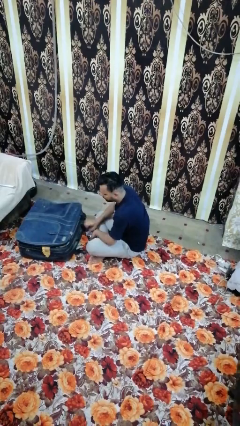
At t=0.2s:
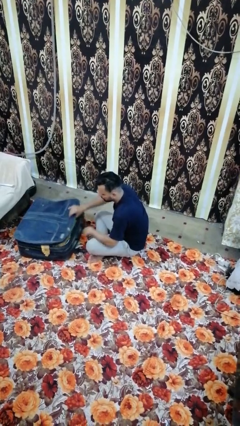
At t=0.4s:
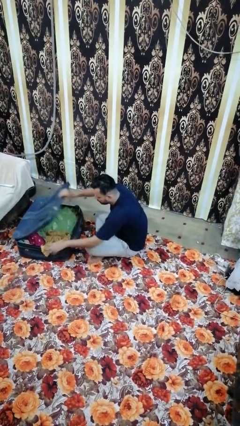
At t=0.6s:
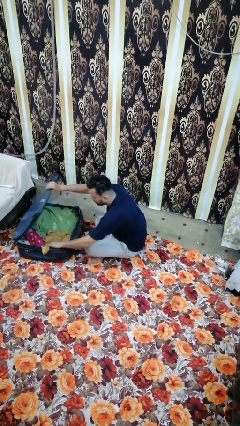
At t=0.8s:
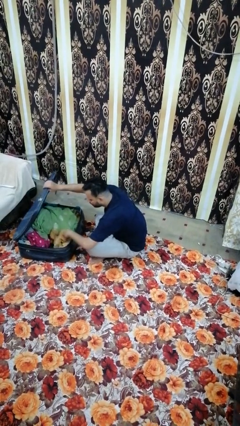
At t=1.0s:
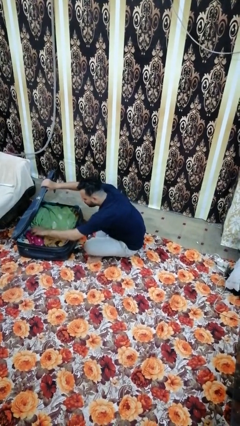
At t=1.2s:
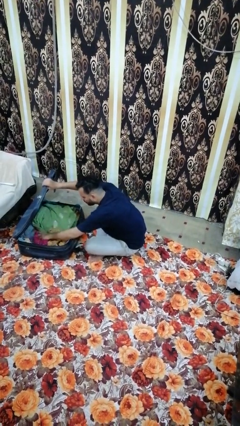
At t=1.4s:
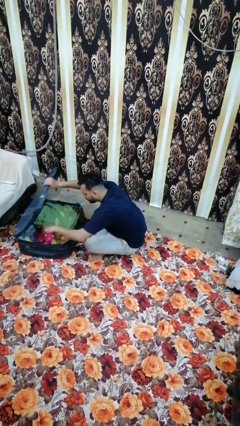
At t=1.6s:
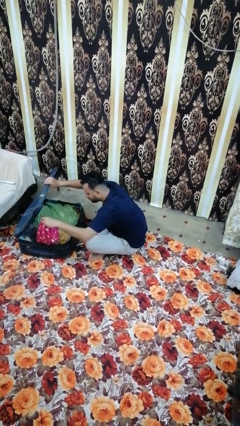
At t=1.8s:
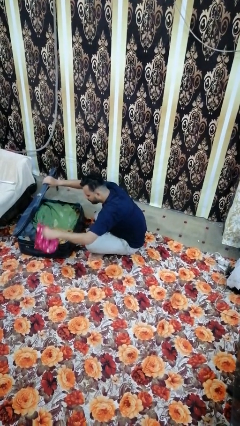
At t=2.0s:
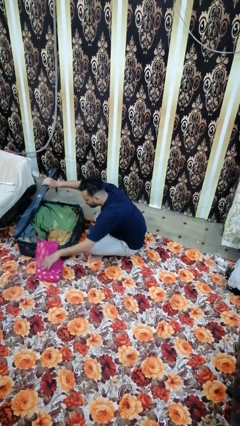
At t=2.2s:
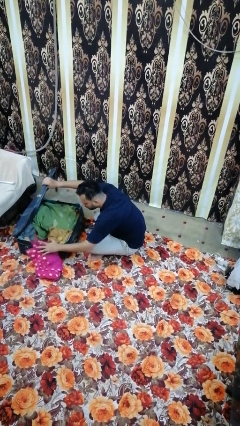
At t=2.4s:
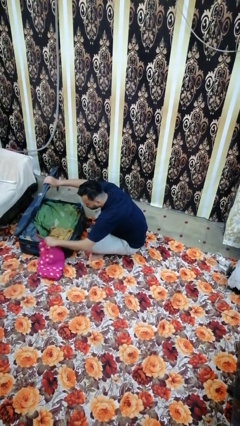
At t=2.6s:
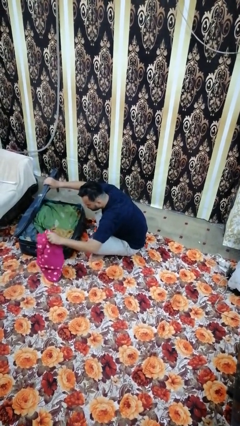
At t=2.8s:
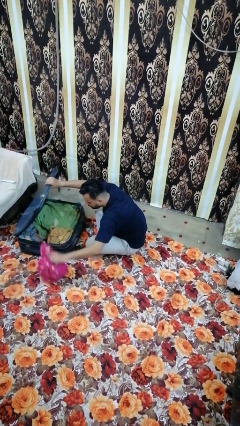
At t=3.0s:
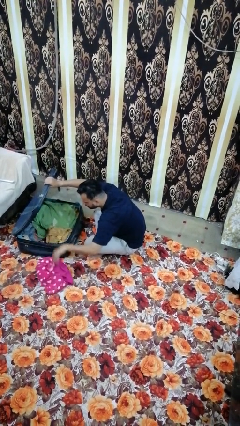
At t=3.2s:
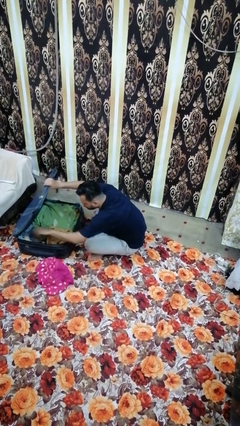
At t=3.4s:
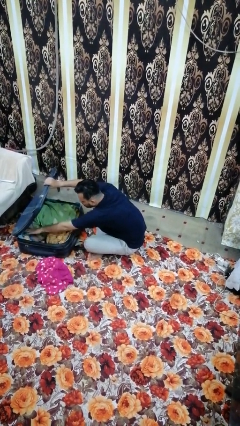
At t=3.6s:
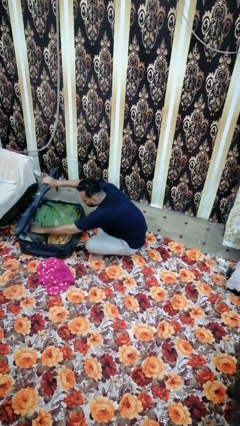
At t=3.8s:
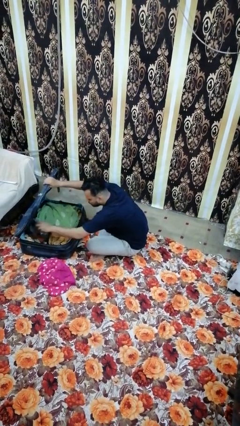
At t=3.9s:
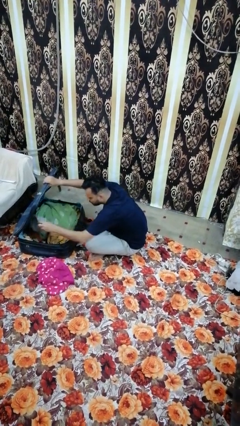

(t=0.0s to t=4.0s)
person unloads clothes from suitcase

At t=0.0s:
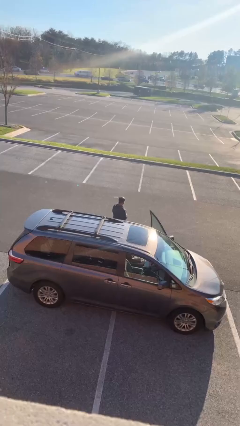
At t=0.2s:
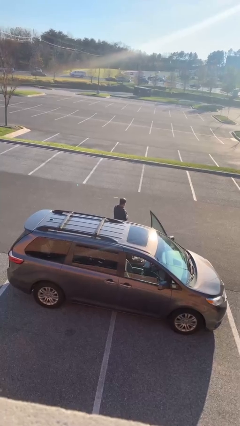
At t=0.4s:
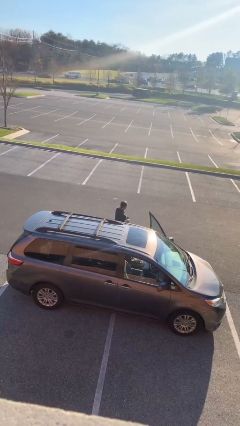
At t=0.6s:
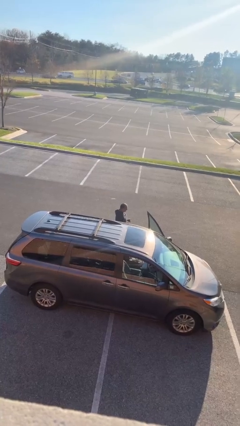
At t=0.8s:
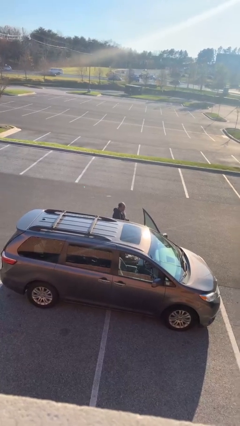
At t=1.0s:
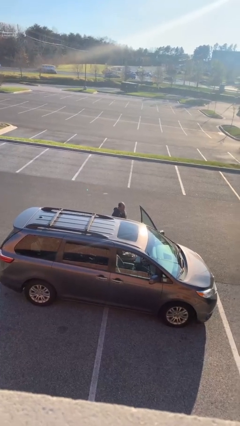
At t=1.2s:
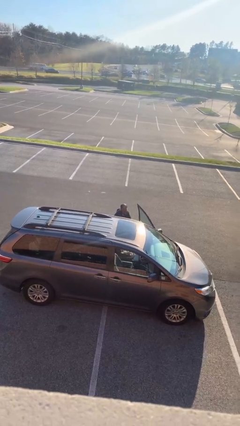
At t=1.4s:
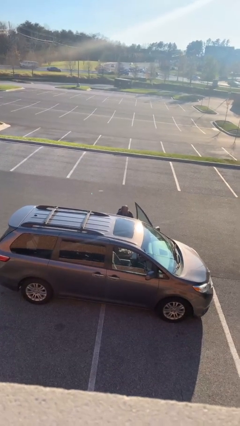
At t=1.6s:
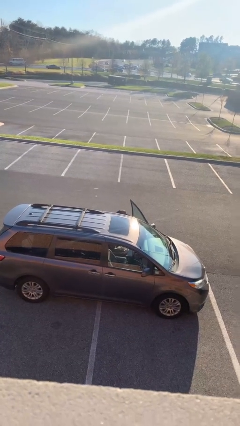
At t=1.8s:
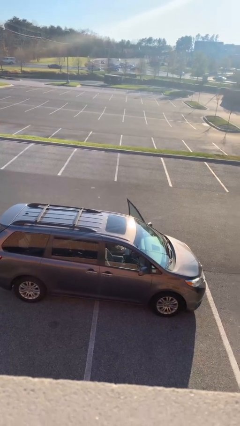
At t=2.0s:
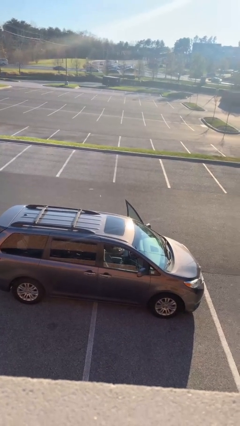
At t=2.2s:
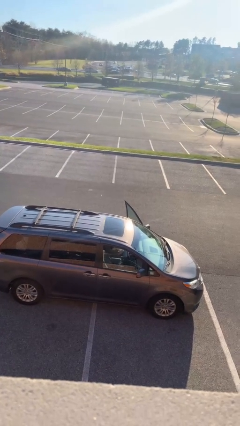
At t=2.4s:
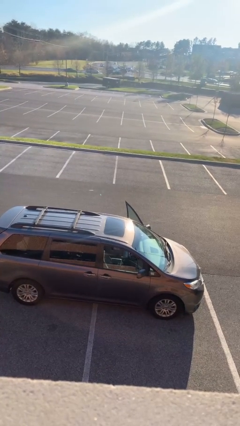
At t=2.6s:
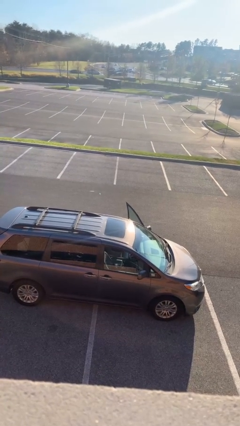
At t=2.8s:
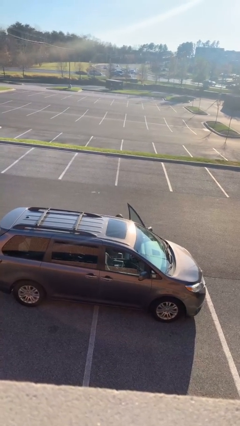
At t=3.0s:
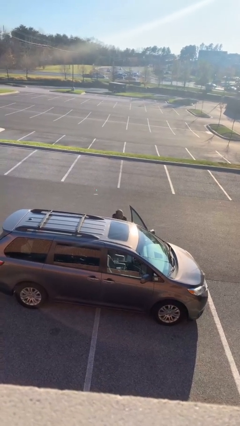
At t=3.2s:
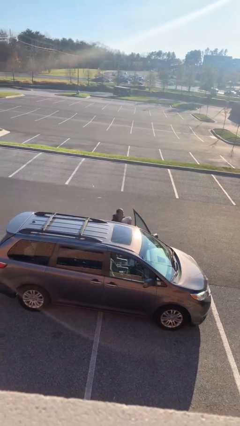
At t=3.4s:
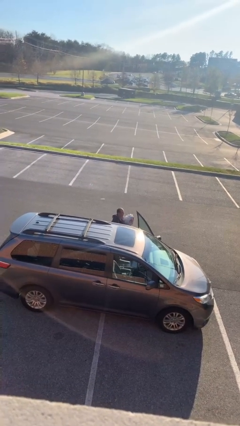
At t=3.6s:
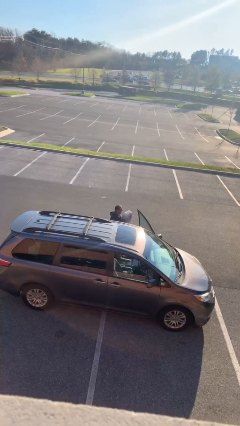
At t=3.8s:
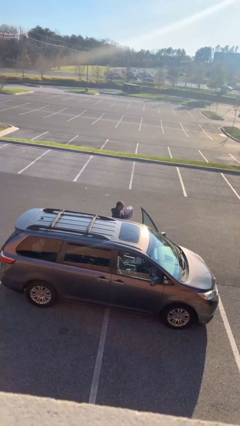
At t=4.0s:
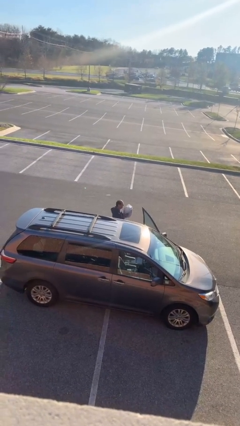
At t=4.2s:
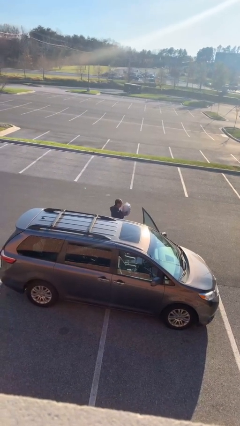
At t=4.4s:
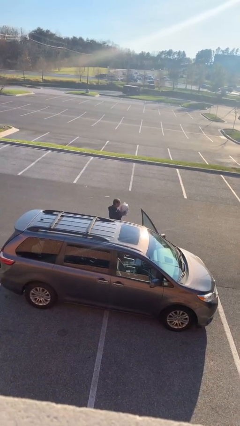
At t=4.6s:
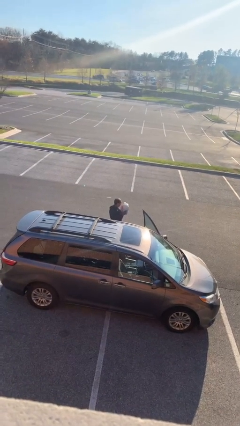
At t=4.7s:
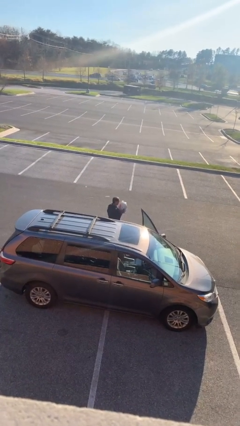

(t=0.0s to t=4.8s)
person unloads car

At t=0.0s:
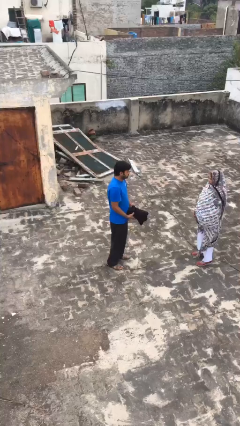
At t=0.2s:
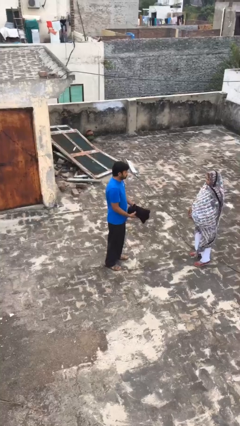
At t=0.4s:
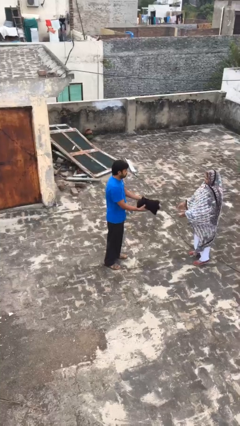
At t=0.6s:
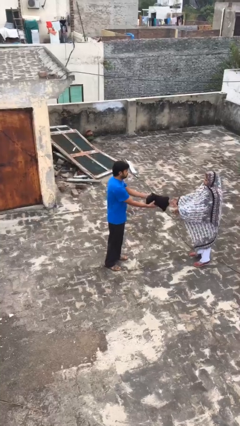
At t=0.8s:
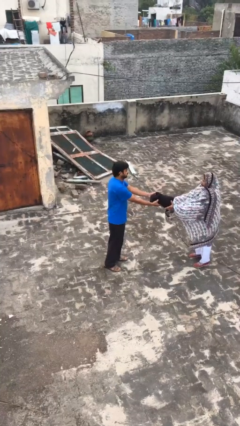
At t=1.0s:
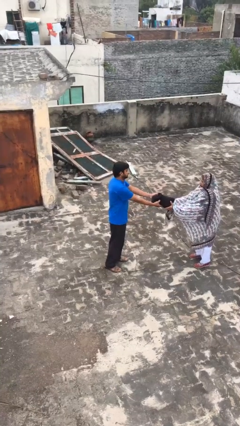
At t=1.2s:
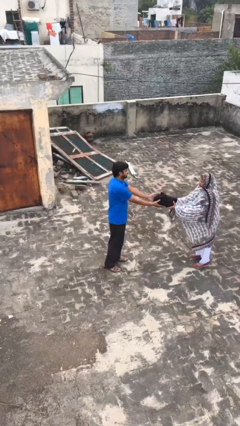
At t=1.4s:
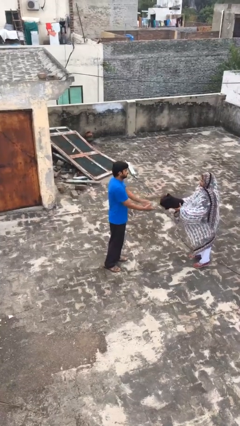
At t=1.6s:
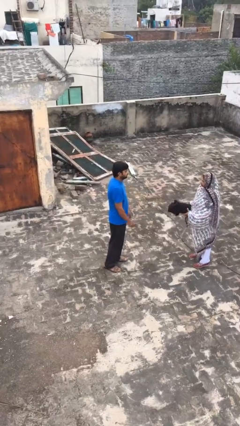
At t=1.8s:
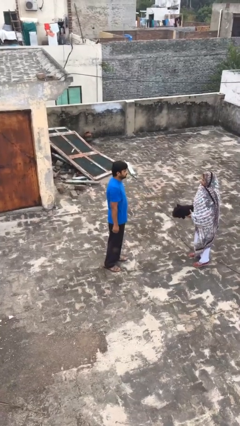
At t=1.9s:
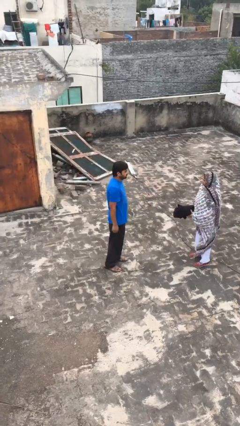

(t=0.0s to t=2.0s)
person transfers object to person

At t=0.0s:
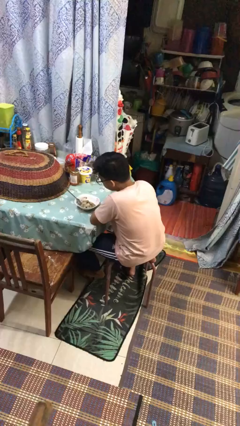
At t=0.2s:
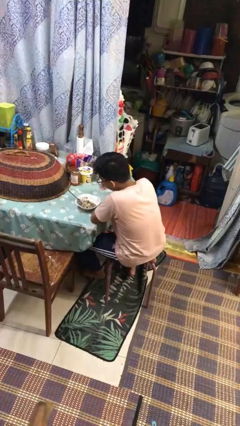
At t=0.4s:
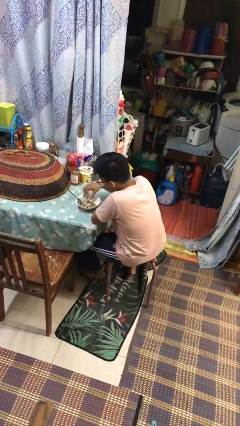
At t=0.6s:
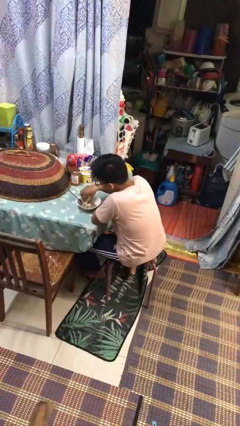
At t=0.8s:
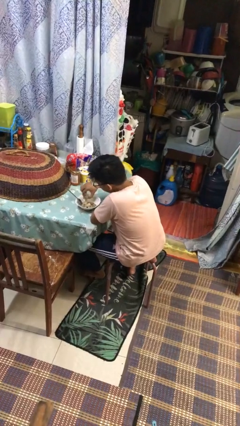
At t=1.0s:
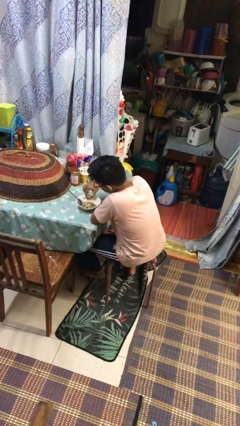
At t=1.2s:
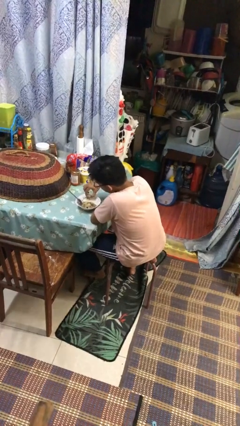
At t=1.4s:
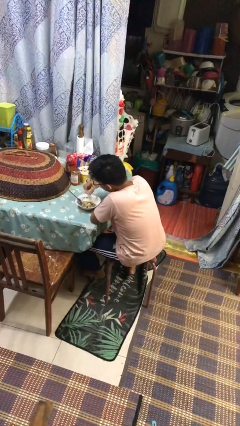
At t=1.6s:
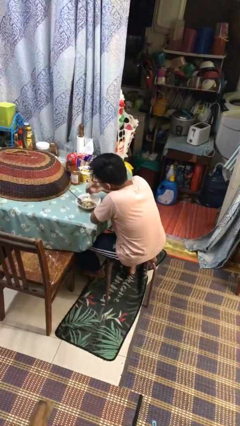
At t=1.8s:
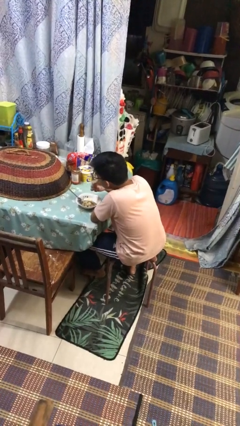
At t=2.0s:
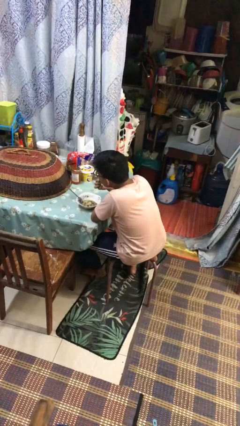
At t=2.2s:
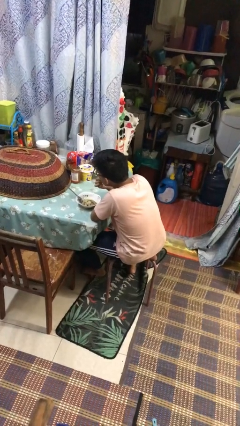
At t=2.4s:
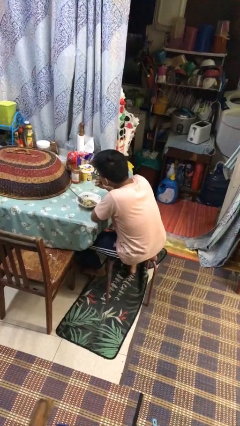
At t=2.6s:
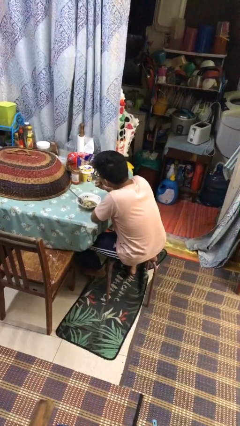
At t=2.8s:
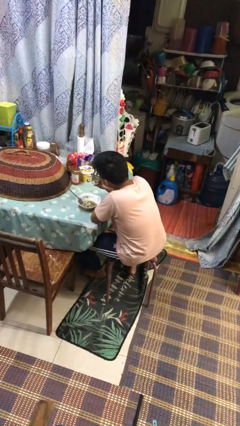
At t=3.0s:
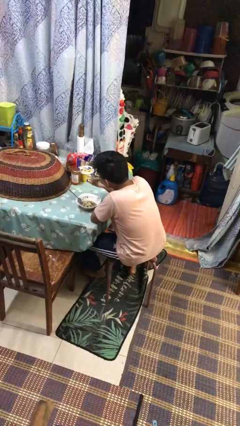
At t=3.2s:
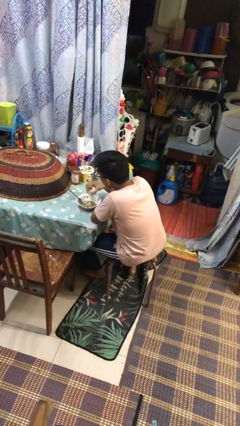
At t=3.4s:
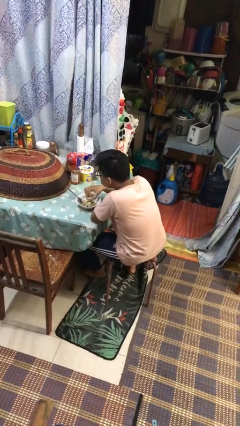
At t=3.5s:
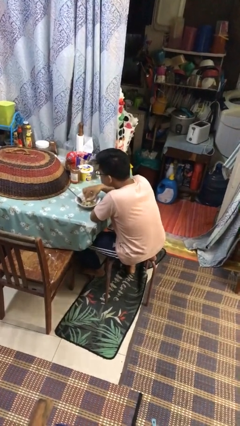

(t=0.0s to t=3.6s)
person eats with hands

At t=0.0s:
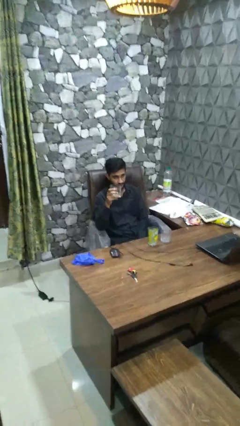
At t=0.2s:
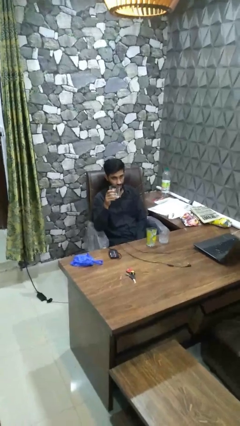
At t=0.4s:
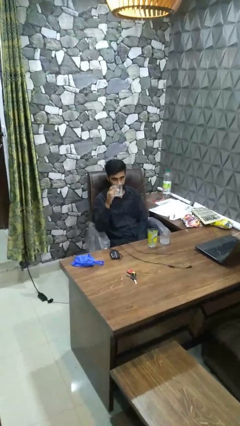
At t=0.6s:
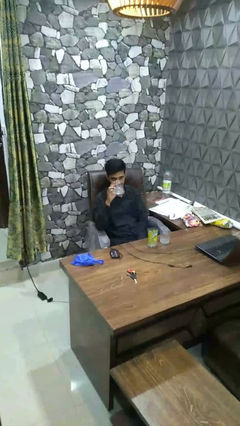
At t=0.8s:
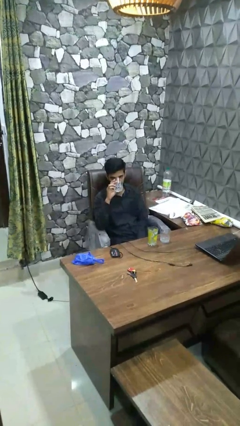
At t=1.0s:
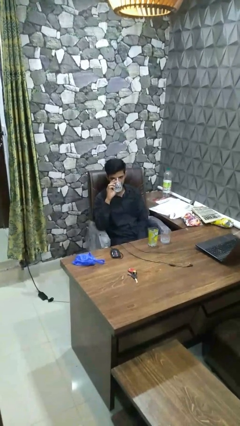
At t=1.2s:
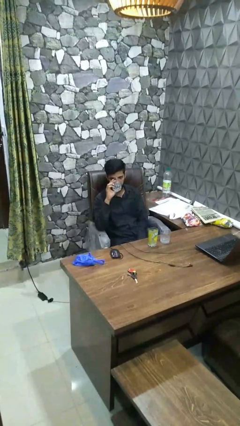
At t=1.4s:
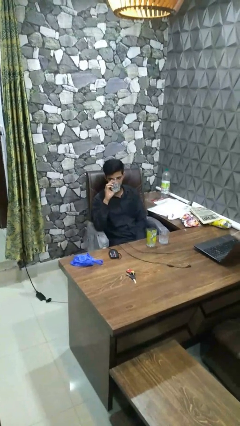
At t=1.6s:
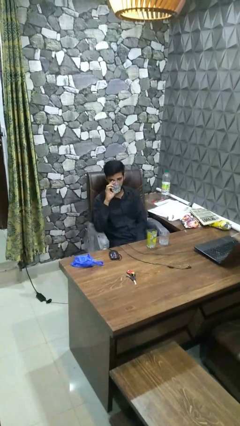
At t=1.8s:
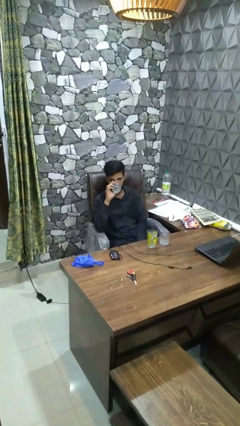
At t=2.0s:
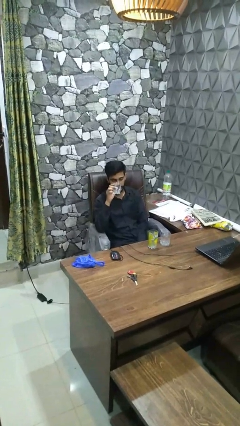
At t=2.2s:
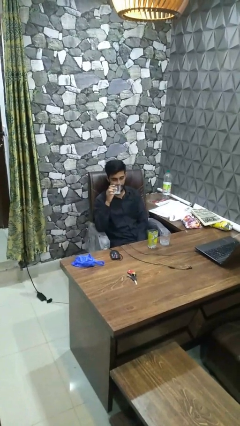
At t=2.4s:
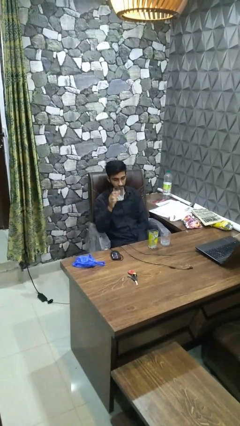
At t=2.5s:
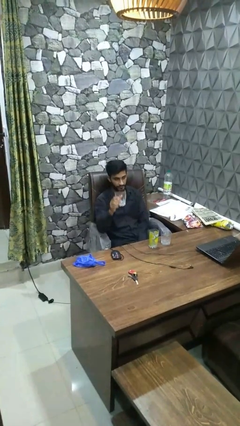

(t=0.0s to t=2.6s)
person drinks from shotglass

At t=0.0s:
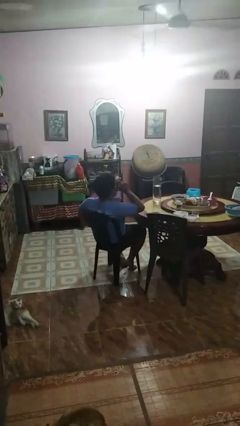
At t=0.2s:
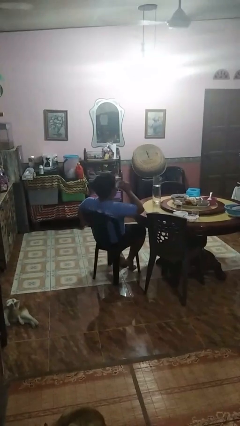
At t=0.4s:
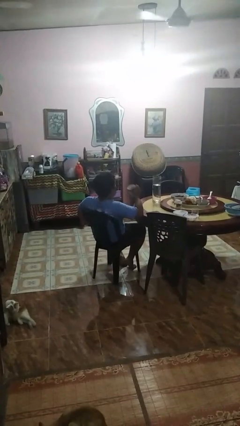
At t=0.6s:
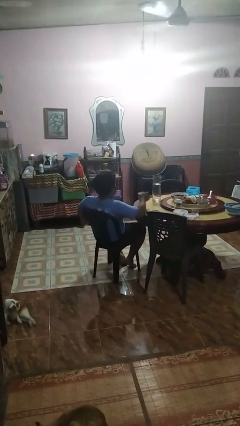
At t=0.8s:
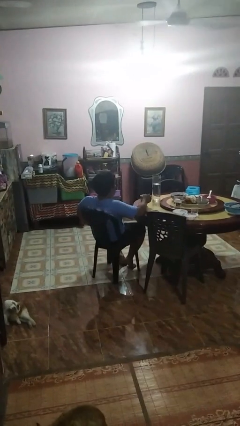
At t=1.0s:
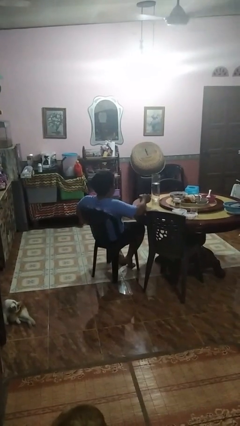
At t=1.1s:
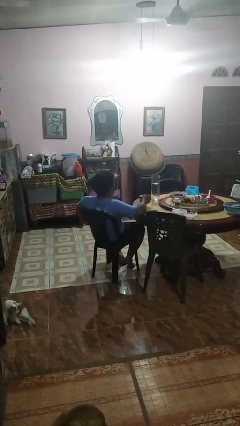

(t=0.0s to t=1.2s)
person drinks from mug
